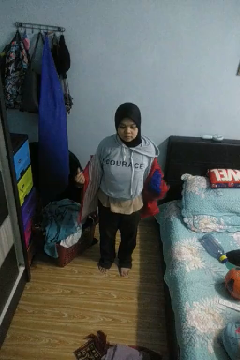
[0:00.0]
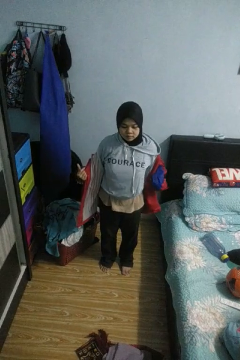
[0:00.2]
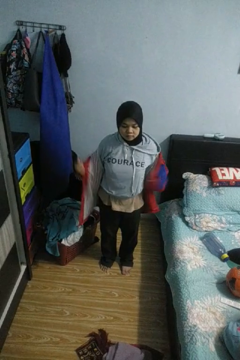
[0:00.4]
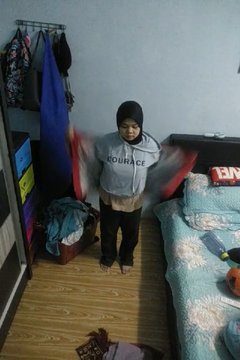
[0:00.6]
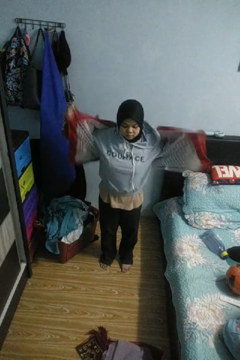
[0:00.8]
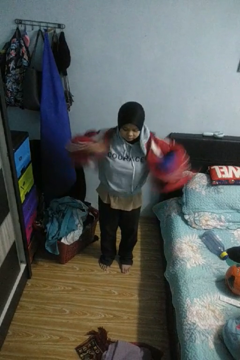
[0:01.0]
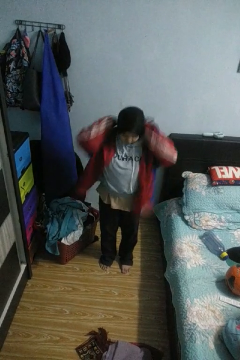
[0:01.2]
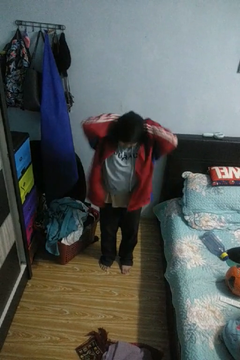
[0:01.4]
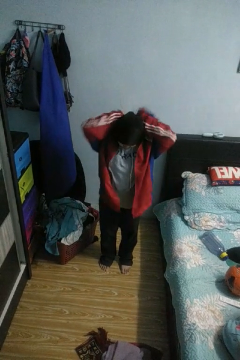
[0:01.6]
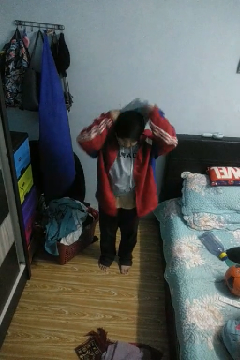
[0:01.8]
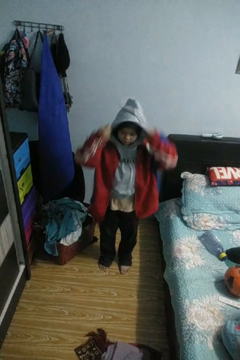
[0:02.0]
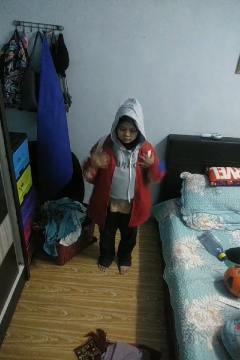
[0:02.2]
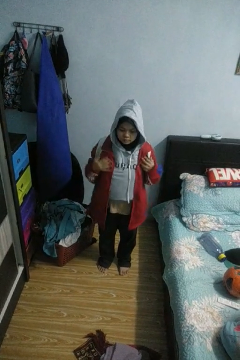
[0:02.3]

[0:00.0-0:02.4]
person puts on hoodie

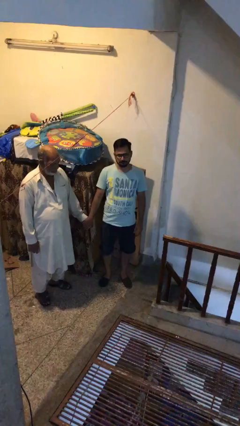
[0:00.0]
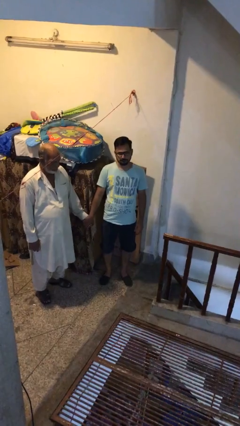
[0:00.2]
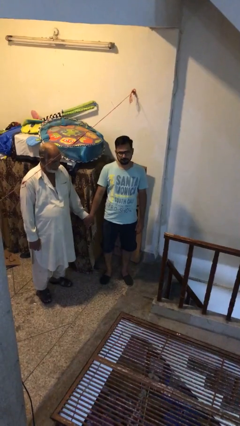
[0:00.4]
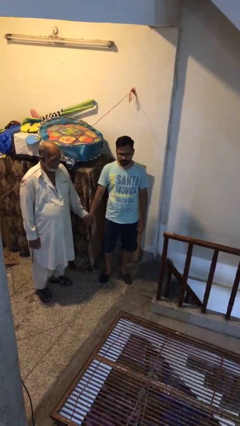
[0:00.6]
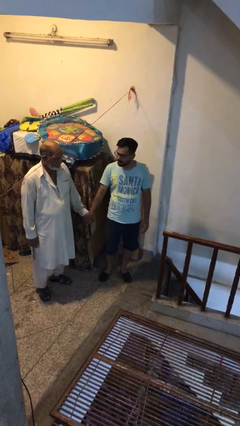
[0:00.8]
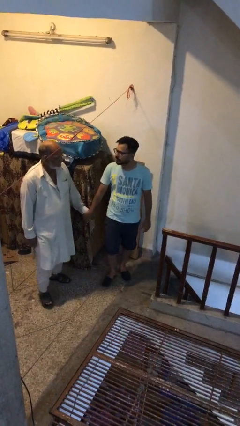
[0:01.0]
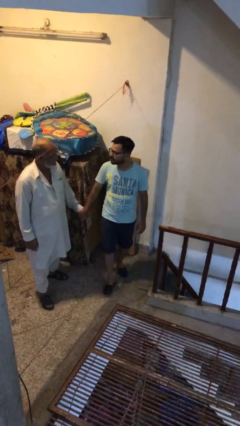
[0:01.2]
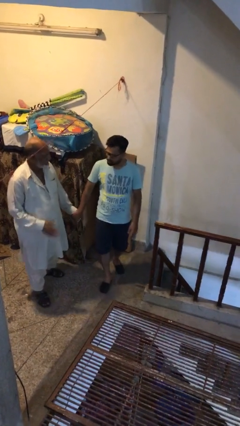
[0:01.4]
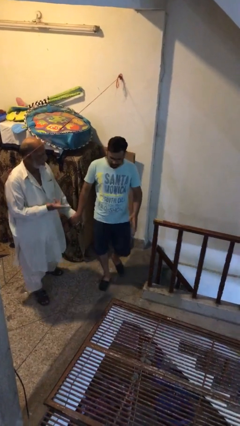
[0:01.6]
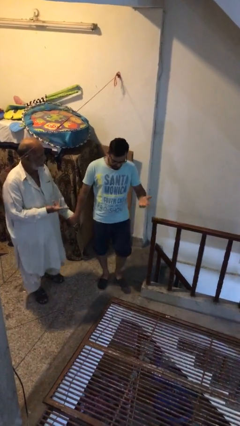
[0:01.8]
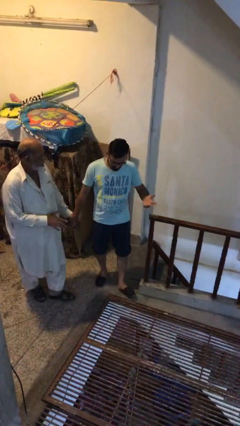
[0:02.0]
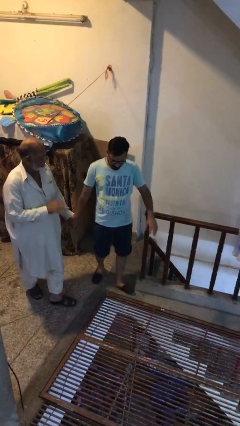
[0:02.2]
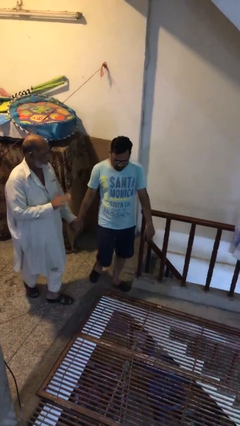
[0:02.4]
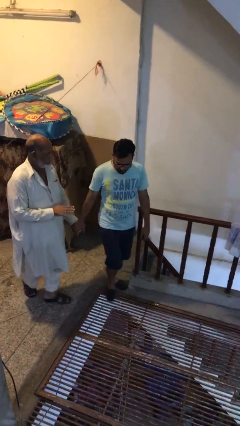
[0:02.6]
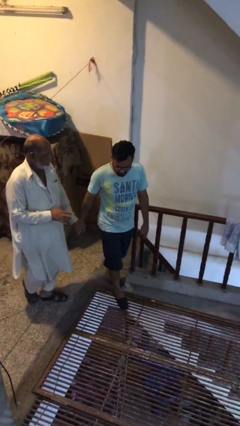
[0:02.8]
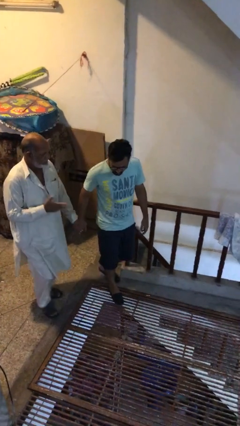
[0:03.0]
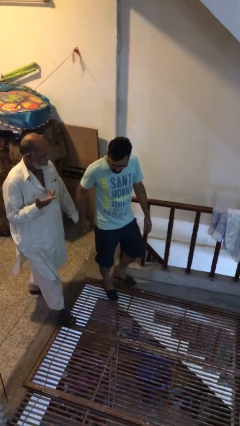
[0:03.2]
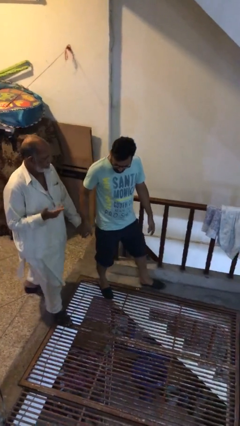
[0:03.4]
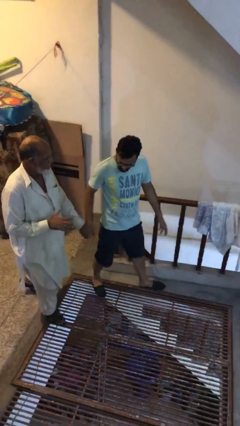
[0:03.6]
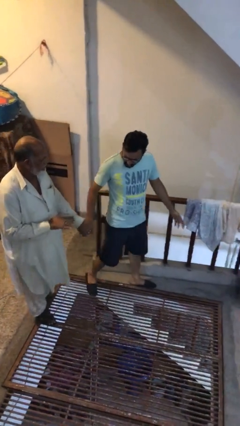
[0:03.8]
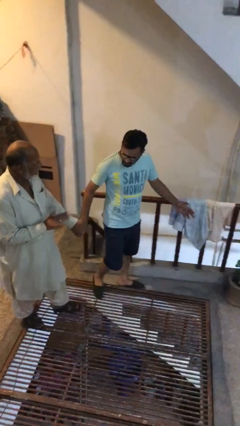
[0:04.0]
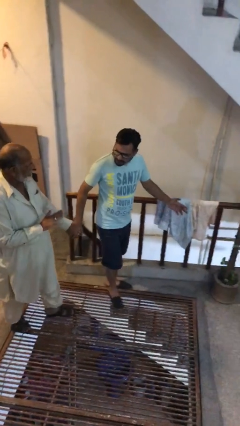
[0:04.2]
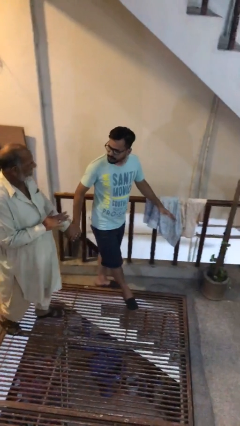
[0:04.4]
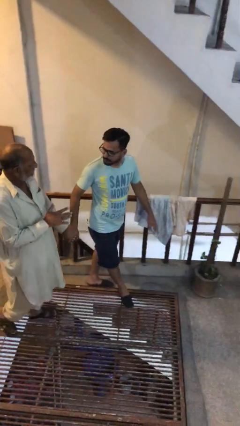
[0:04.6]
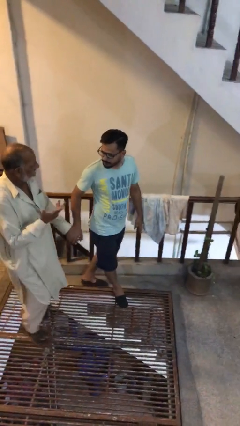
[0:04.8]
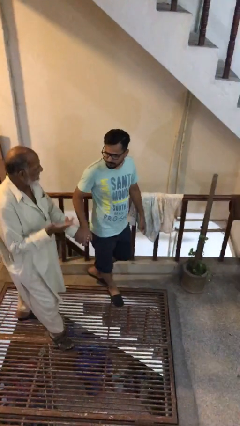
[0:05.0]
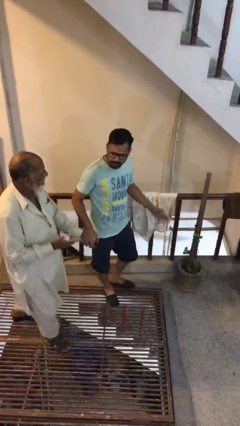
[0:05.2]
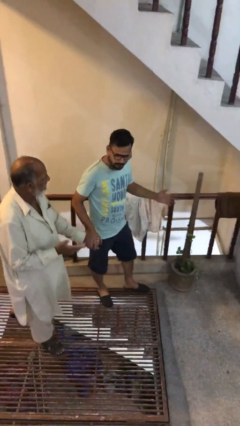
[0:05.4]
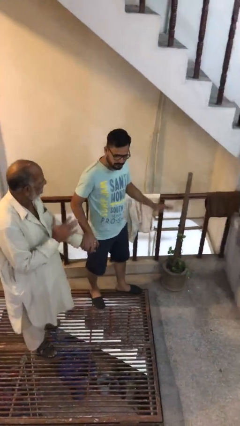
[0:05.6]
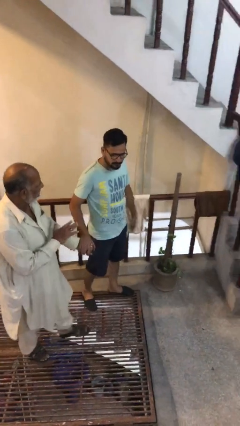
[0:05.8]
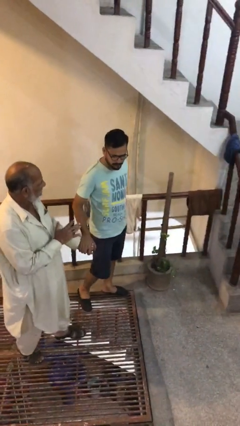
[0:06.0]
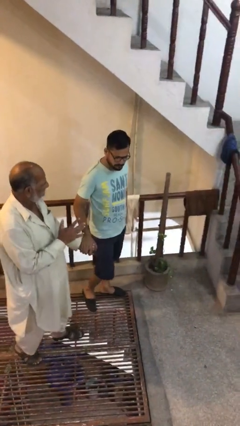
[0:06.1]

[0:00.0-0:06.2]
person holds hand

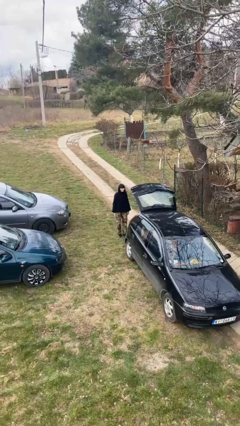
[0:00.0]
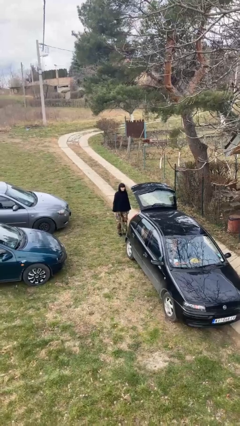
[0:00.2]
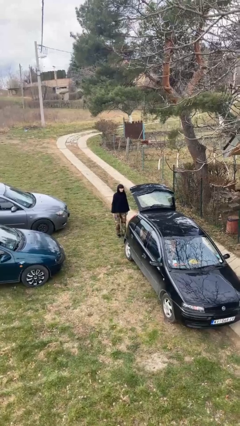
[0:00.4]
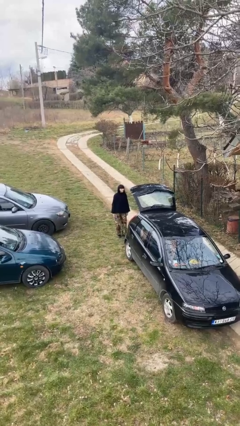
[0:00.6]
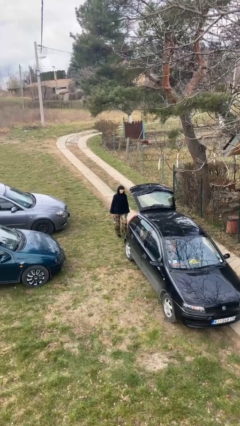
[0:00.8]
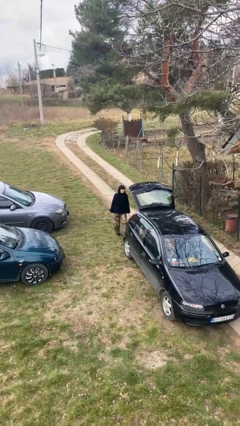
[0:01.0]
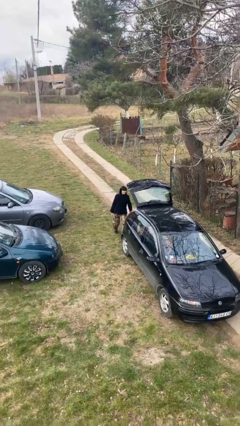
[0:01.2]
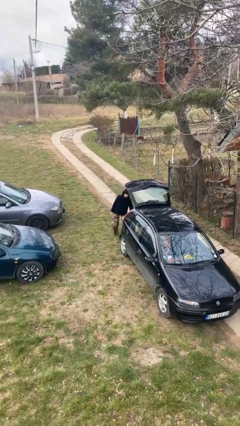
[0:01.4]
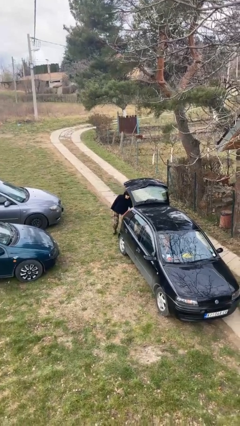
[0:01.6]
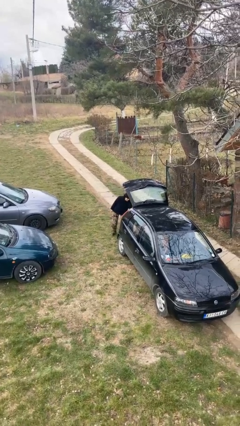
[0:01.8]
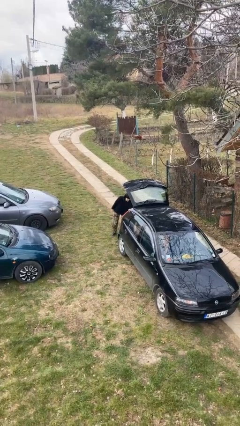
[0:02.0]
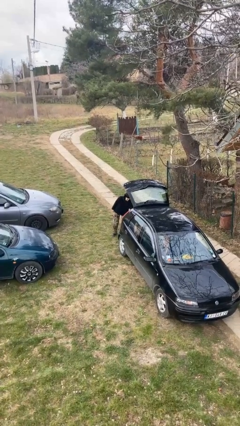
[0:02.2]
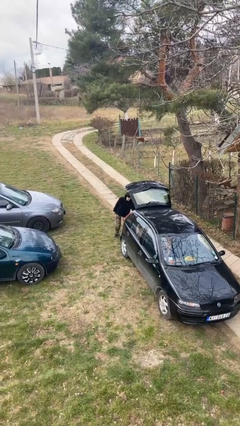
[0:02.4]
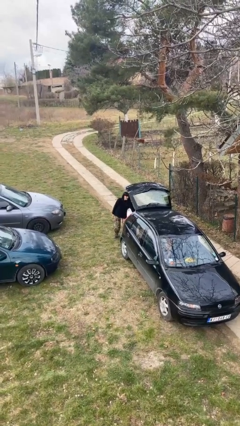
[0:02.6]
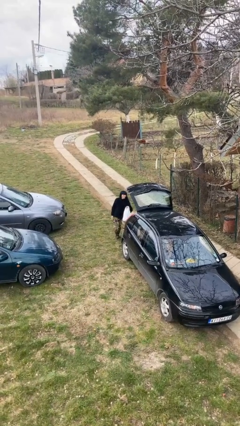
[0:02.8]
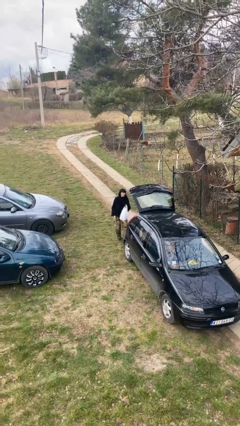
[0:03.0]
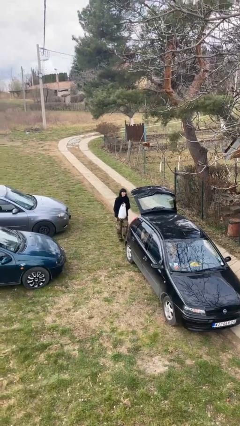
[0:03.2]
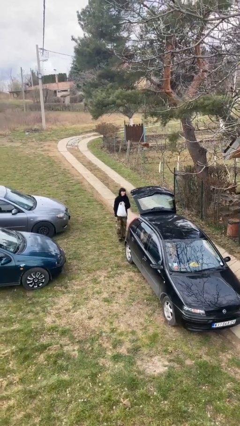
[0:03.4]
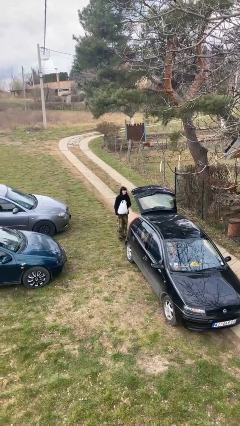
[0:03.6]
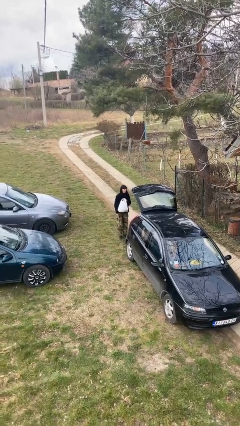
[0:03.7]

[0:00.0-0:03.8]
person unloads car

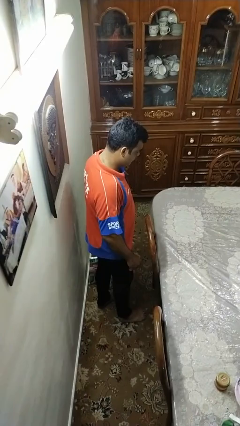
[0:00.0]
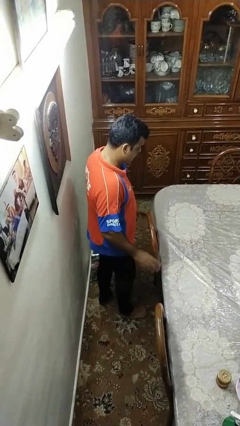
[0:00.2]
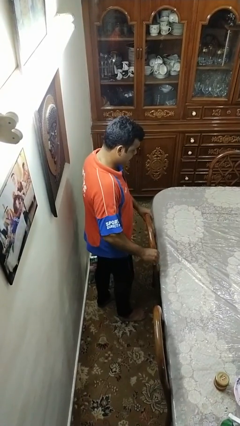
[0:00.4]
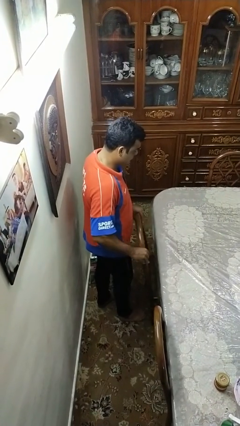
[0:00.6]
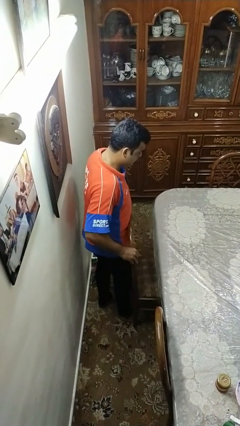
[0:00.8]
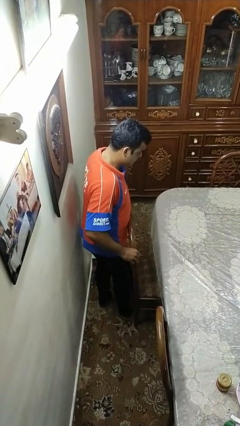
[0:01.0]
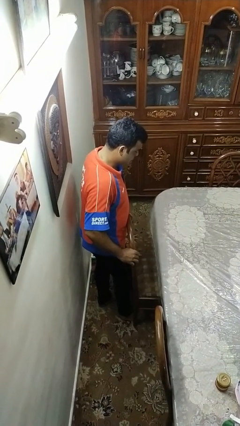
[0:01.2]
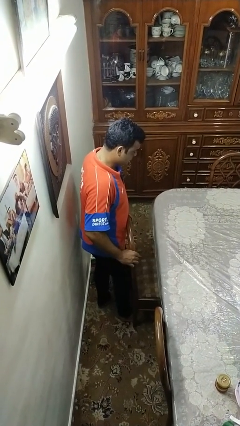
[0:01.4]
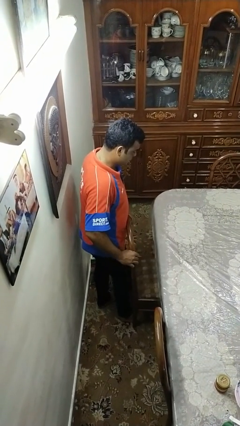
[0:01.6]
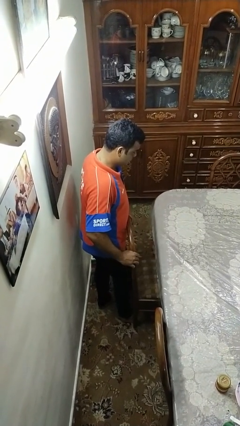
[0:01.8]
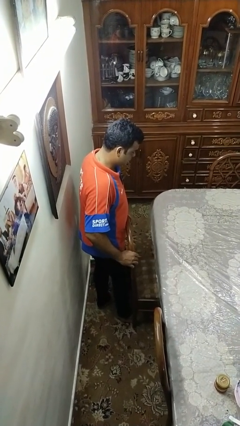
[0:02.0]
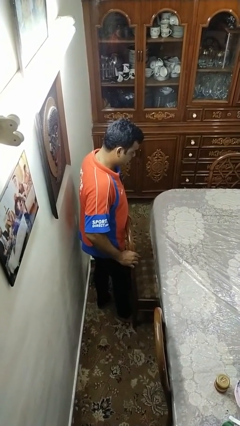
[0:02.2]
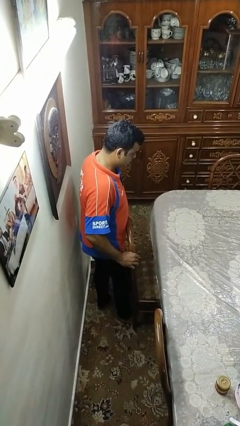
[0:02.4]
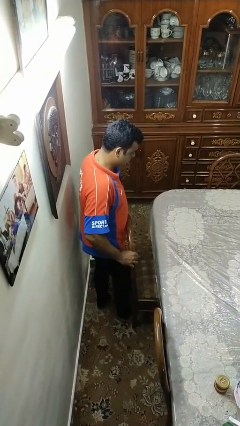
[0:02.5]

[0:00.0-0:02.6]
person pulls out chair

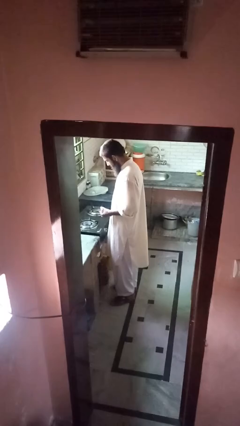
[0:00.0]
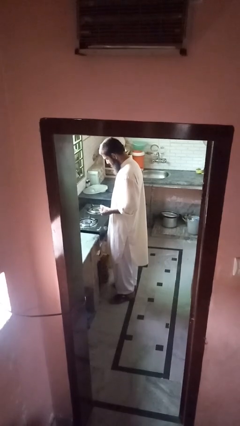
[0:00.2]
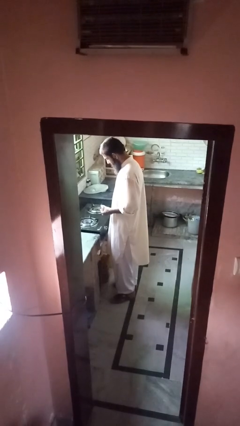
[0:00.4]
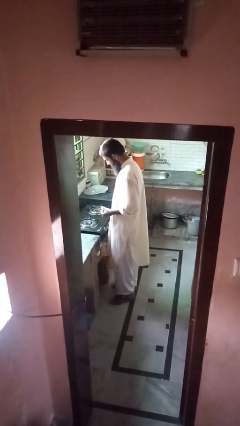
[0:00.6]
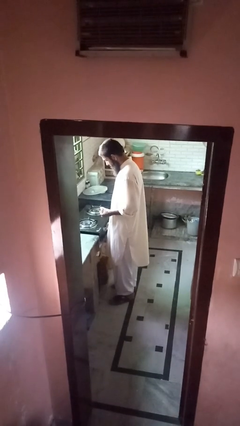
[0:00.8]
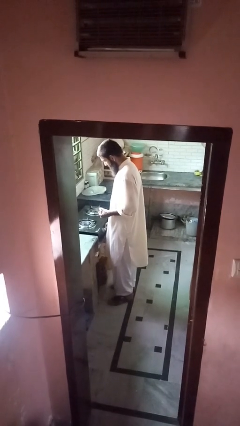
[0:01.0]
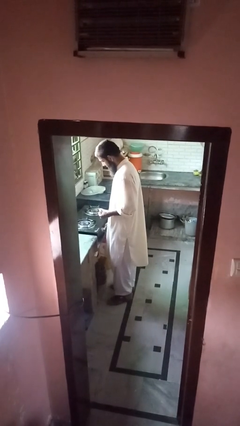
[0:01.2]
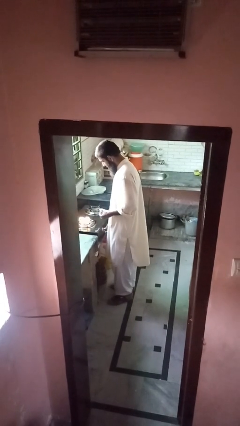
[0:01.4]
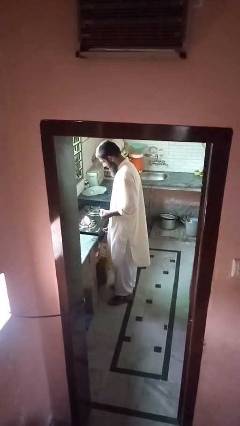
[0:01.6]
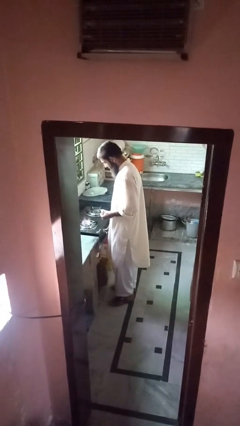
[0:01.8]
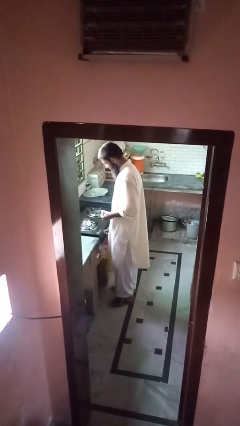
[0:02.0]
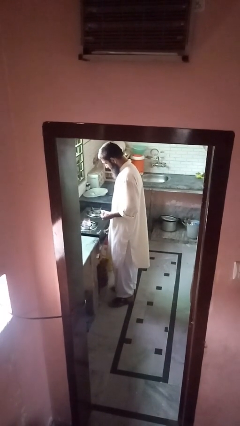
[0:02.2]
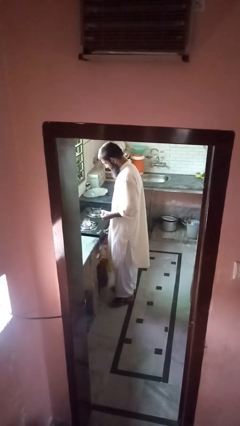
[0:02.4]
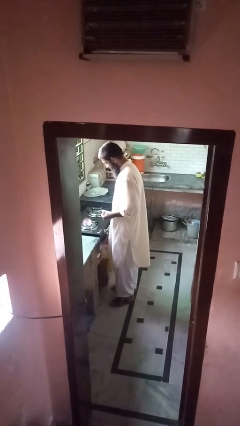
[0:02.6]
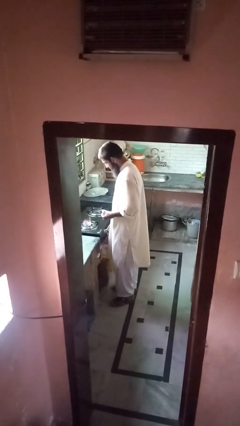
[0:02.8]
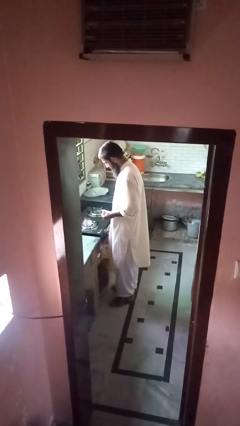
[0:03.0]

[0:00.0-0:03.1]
person turns on stovetop
